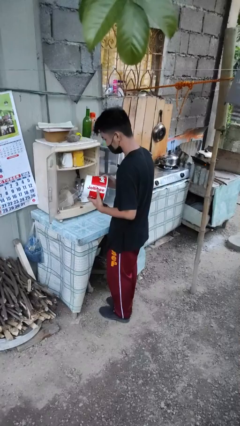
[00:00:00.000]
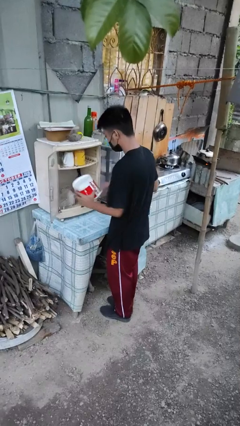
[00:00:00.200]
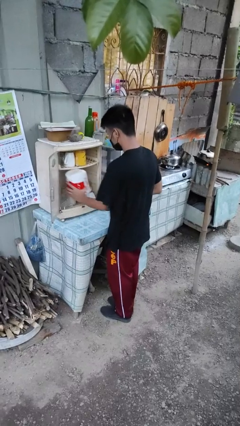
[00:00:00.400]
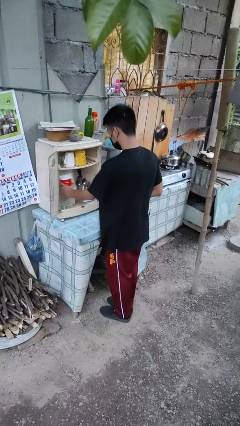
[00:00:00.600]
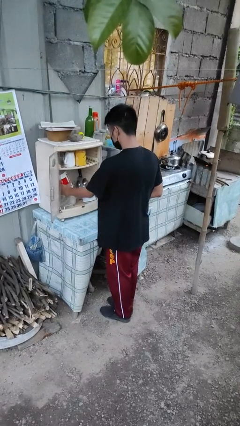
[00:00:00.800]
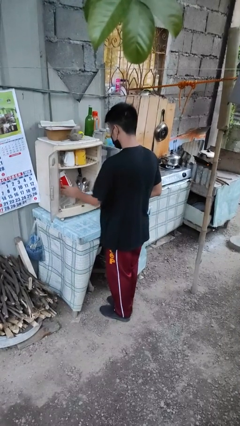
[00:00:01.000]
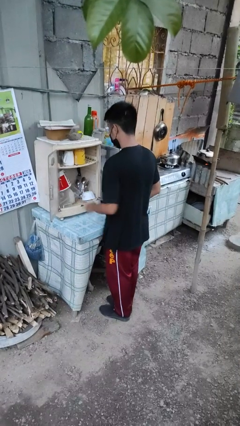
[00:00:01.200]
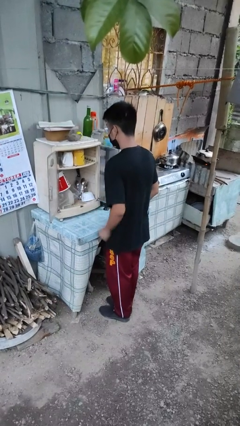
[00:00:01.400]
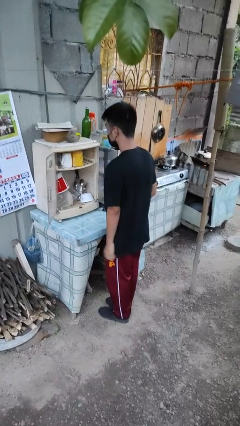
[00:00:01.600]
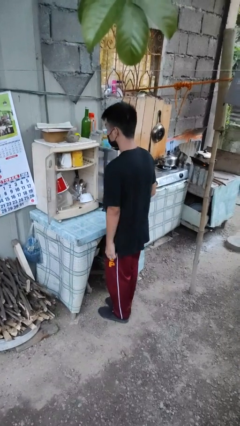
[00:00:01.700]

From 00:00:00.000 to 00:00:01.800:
person puts down object into cabinet

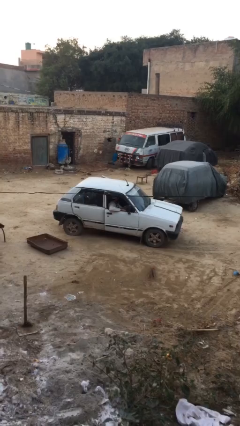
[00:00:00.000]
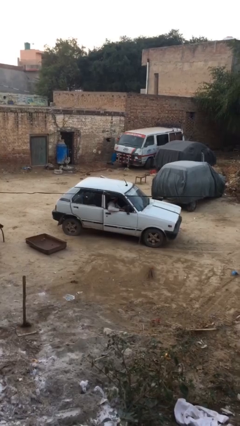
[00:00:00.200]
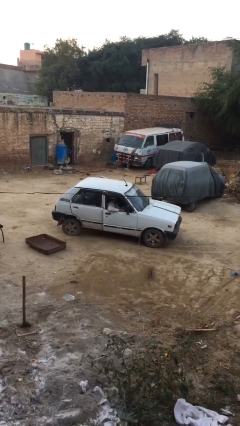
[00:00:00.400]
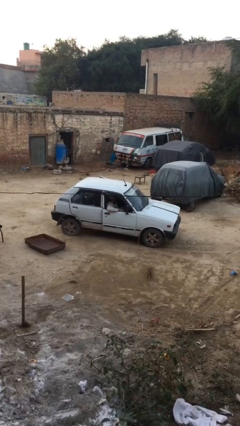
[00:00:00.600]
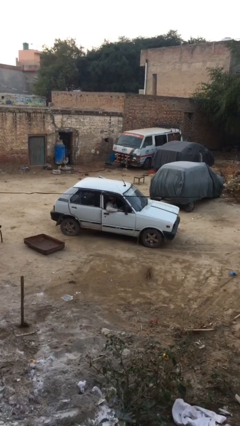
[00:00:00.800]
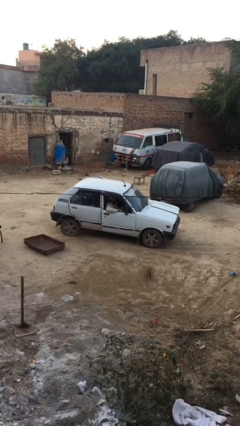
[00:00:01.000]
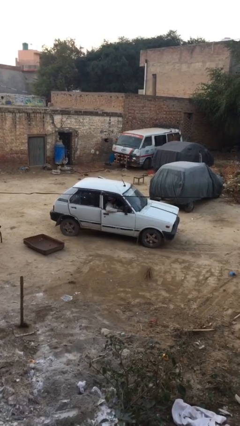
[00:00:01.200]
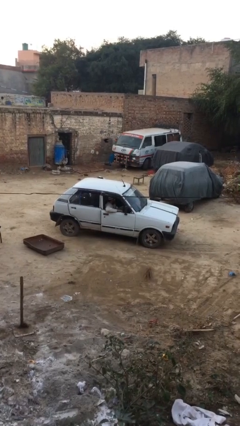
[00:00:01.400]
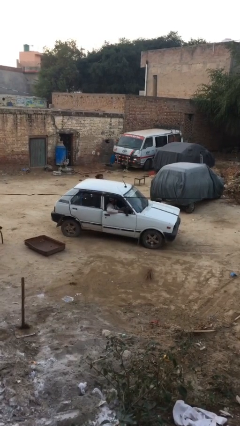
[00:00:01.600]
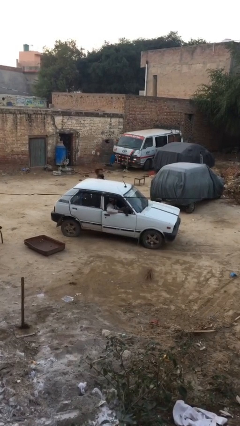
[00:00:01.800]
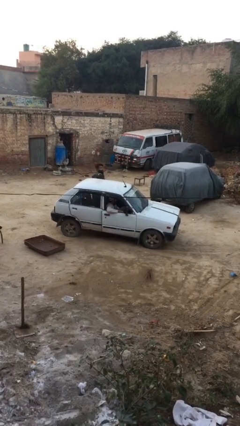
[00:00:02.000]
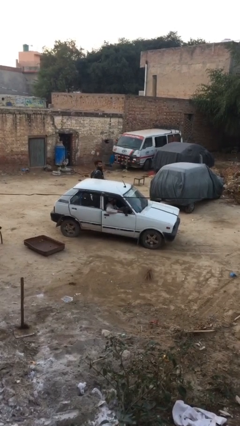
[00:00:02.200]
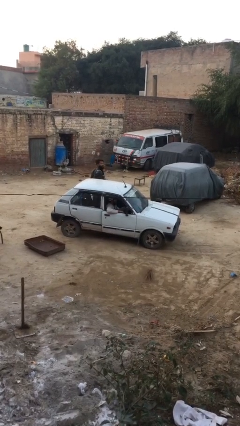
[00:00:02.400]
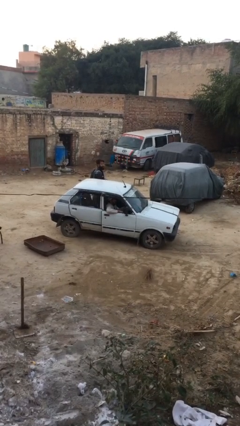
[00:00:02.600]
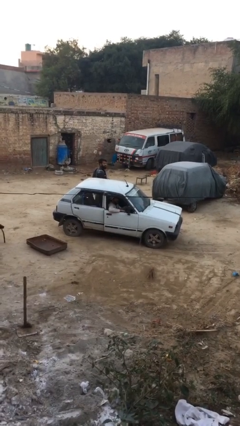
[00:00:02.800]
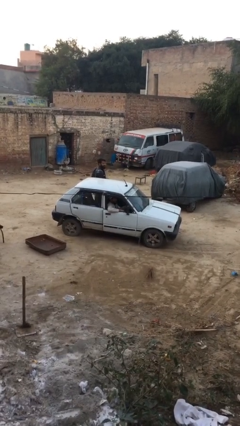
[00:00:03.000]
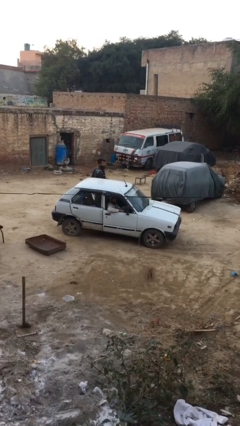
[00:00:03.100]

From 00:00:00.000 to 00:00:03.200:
car drops off person

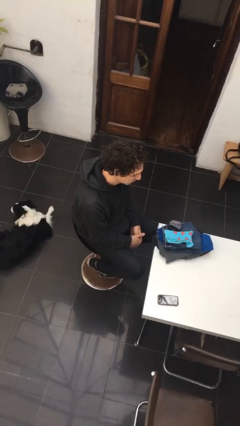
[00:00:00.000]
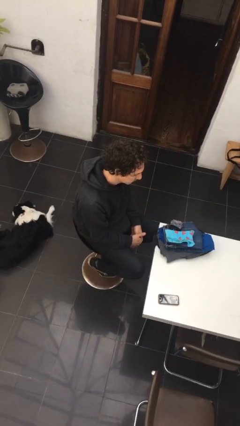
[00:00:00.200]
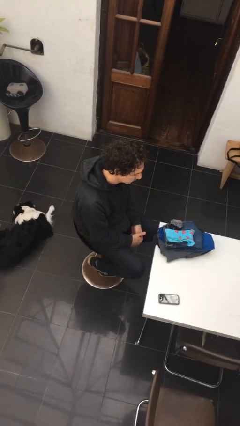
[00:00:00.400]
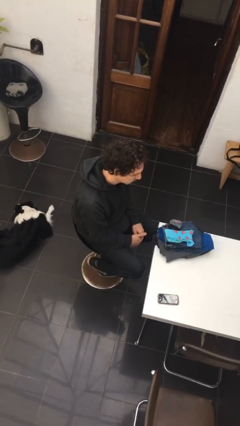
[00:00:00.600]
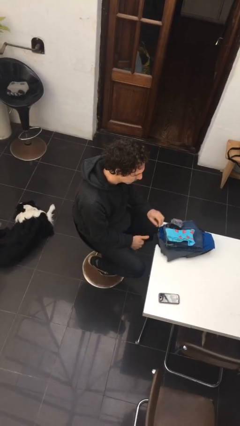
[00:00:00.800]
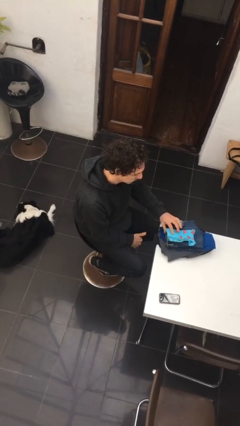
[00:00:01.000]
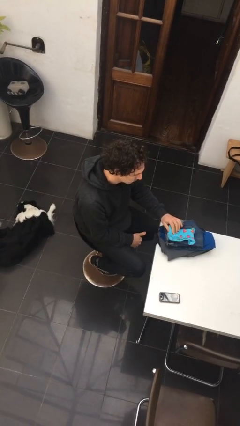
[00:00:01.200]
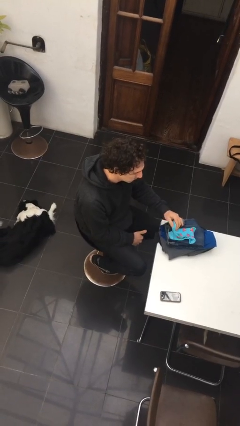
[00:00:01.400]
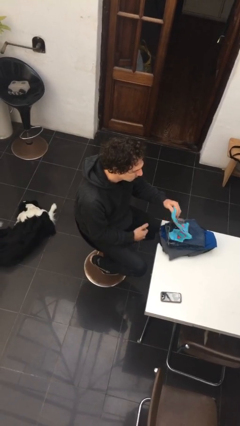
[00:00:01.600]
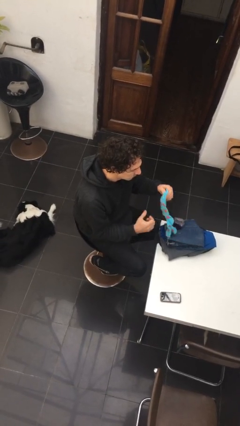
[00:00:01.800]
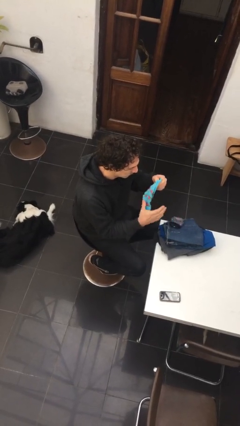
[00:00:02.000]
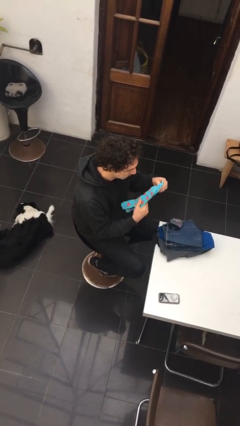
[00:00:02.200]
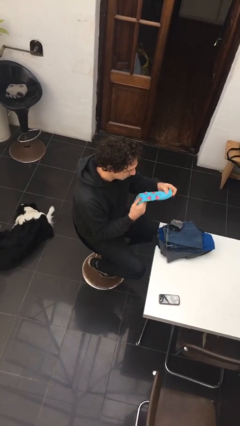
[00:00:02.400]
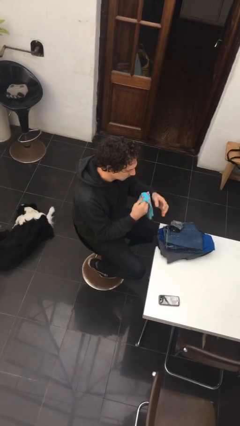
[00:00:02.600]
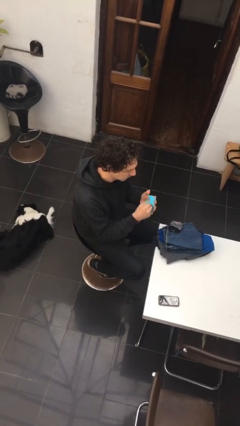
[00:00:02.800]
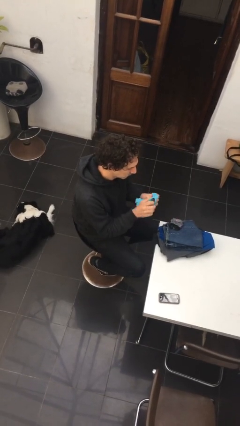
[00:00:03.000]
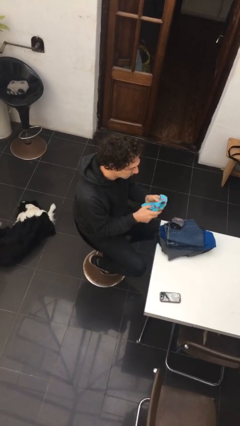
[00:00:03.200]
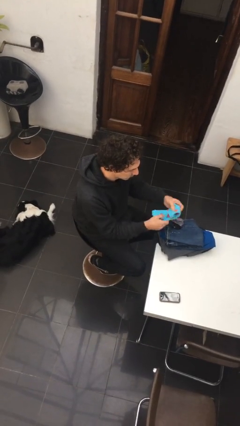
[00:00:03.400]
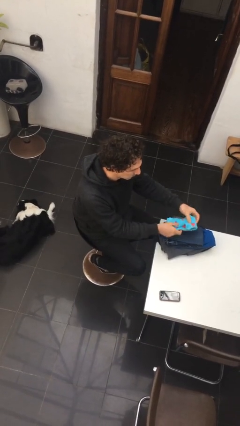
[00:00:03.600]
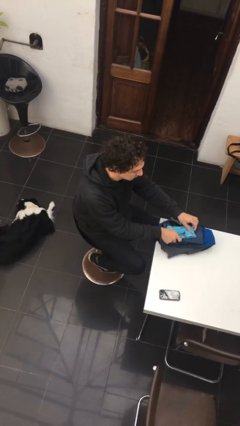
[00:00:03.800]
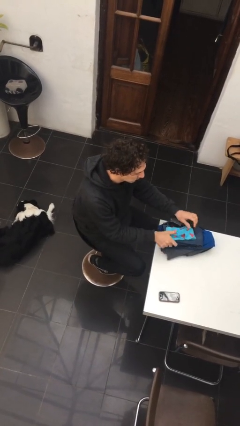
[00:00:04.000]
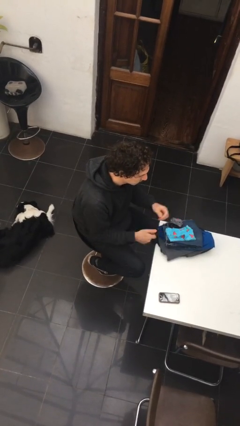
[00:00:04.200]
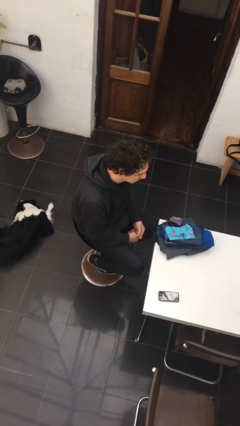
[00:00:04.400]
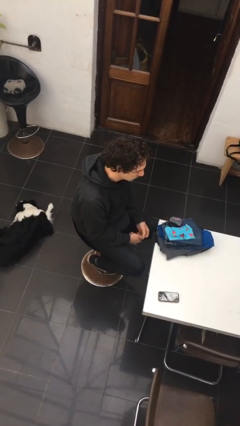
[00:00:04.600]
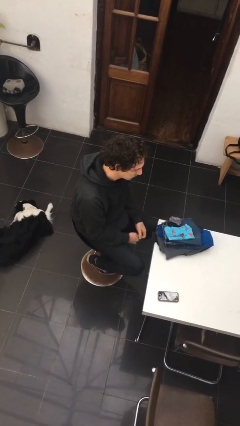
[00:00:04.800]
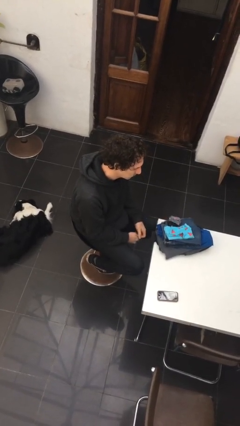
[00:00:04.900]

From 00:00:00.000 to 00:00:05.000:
person folds socks

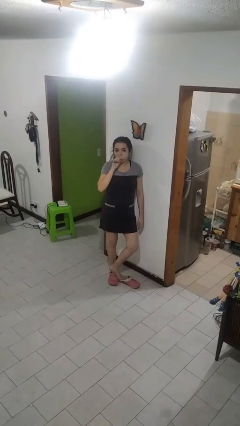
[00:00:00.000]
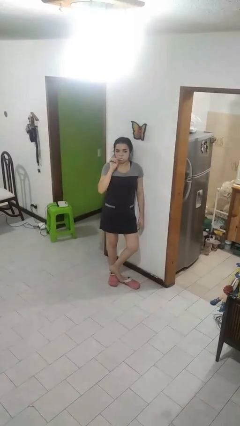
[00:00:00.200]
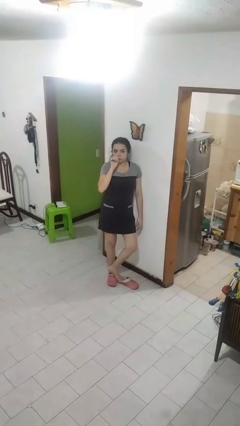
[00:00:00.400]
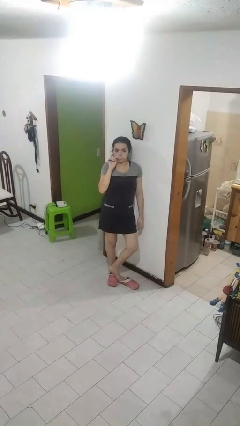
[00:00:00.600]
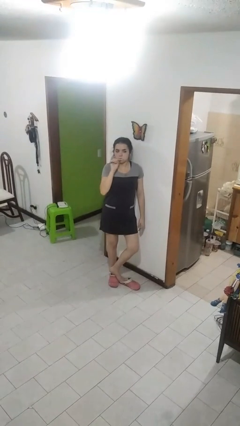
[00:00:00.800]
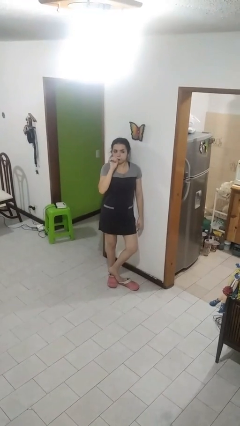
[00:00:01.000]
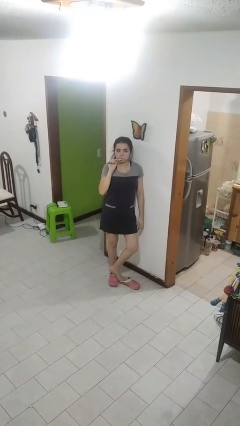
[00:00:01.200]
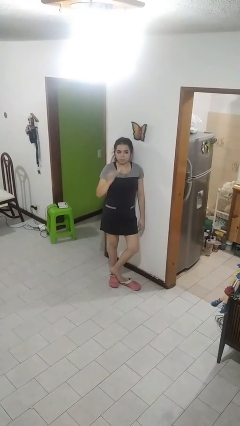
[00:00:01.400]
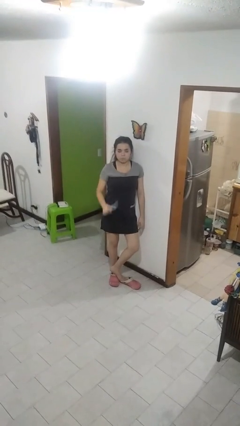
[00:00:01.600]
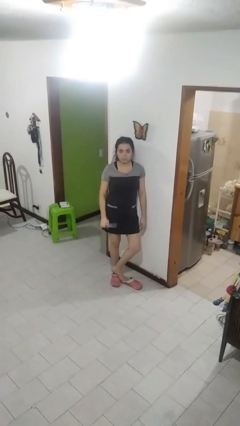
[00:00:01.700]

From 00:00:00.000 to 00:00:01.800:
person brushes teeth

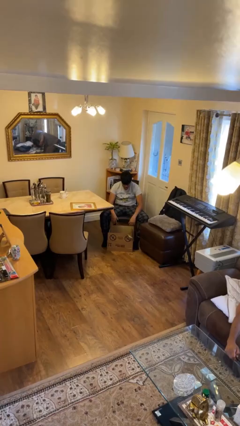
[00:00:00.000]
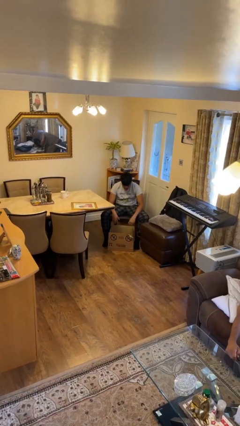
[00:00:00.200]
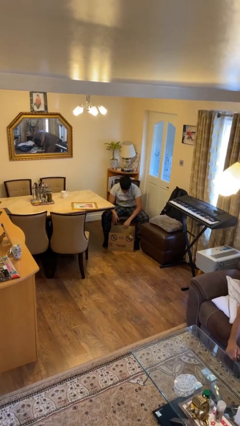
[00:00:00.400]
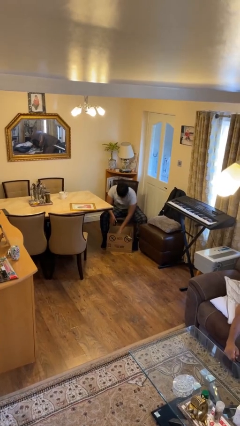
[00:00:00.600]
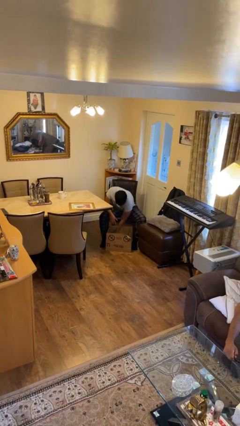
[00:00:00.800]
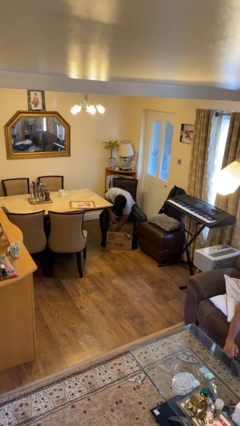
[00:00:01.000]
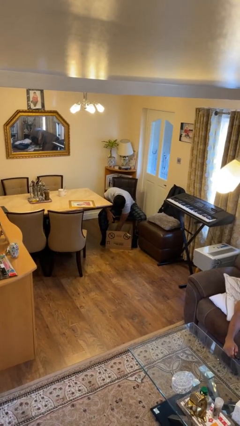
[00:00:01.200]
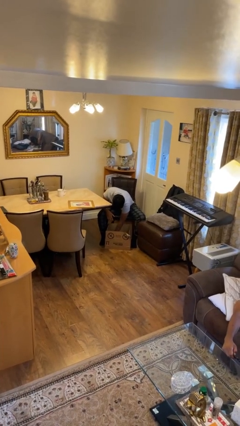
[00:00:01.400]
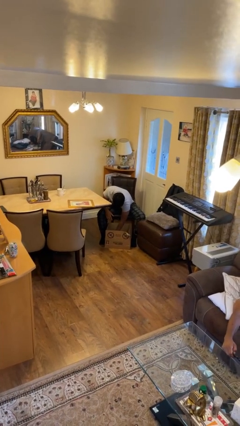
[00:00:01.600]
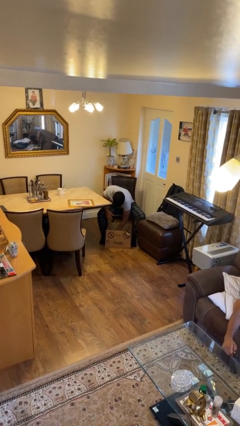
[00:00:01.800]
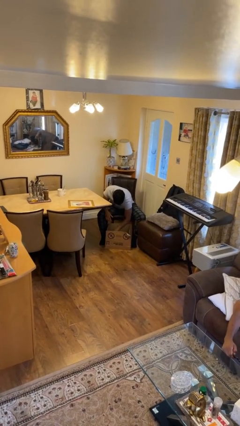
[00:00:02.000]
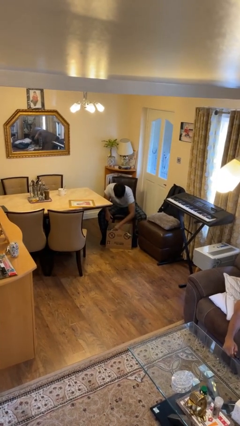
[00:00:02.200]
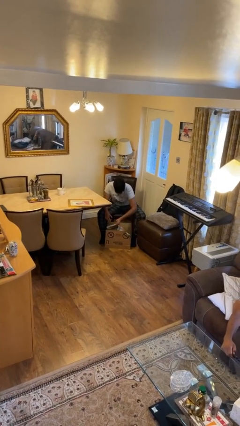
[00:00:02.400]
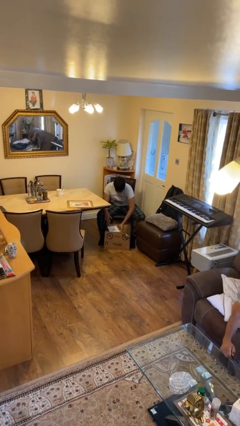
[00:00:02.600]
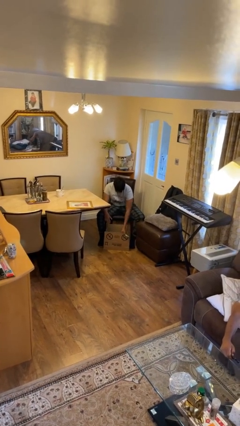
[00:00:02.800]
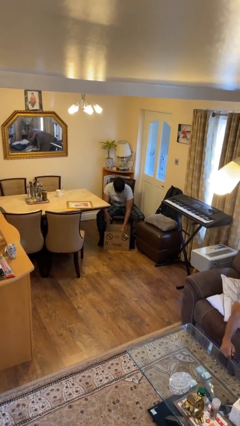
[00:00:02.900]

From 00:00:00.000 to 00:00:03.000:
person searches in box

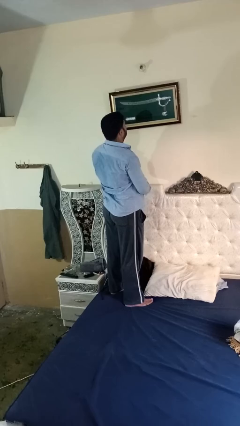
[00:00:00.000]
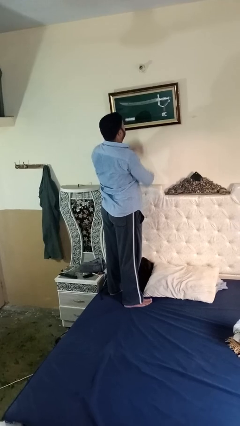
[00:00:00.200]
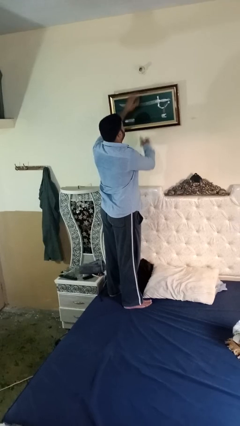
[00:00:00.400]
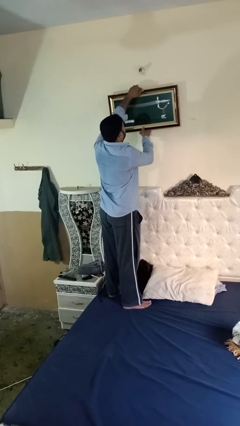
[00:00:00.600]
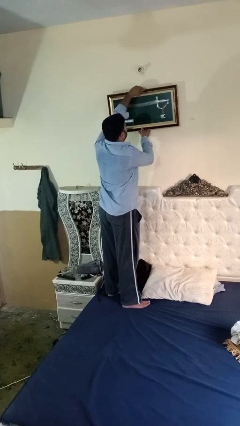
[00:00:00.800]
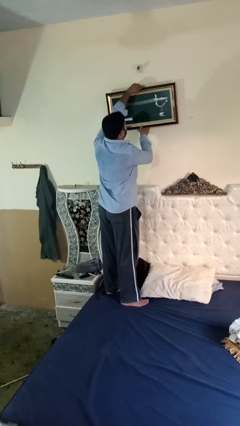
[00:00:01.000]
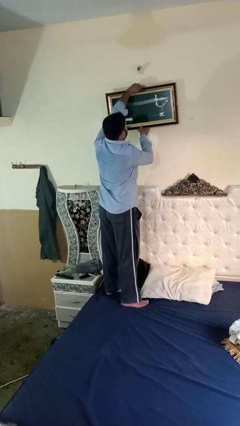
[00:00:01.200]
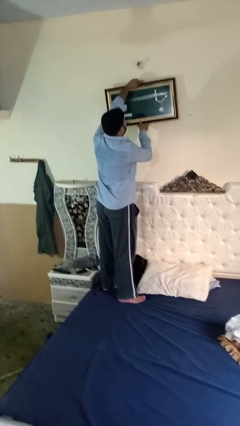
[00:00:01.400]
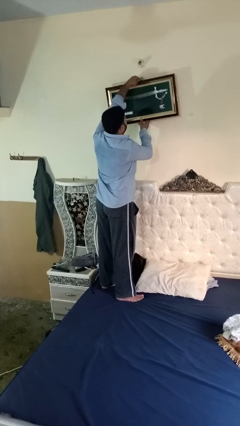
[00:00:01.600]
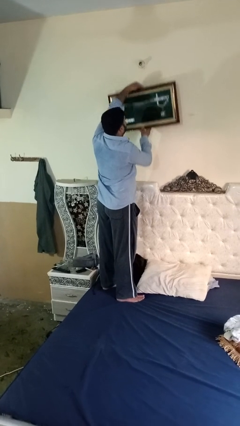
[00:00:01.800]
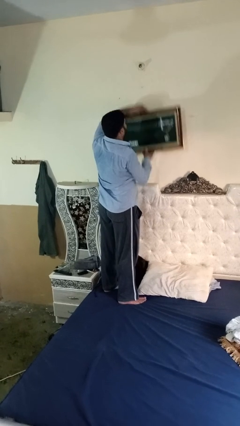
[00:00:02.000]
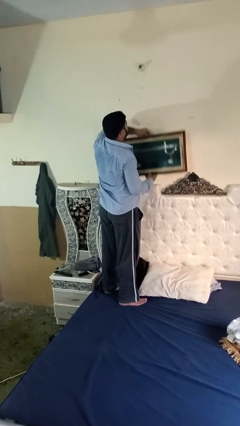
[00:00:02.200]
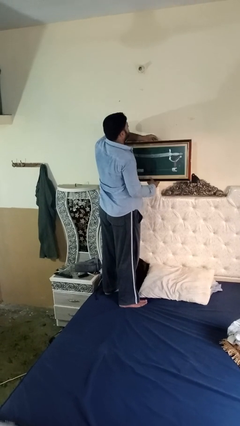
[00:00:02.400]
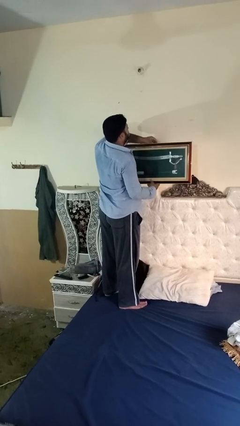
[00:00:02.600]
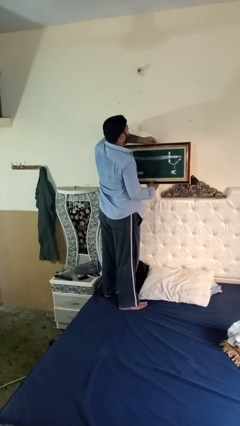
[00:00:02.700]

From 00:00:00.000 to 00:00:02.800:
person takes down picture frame
